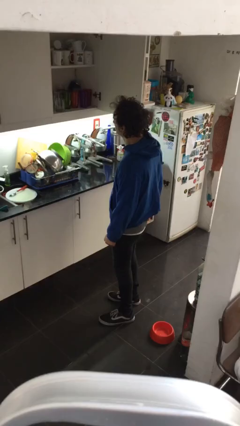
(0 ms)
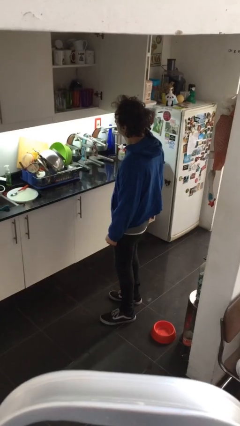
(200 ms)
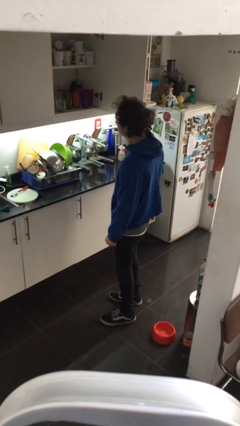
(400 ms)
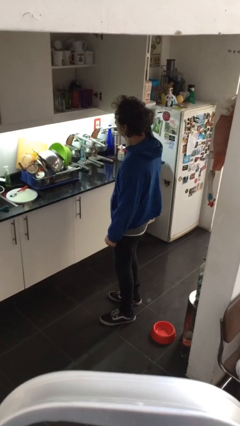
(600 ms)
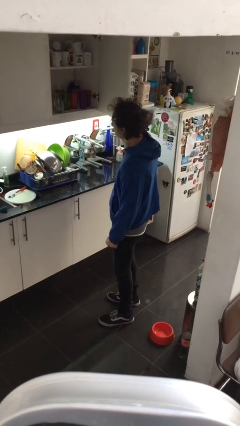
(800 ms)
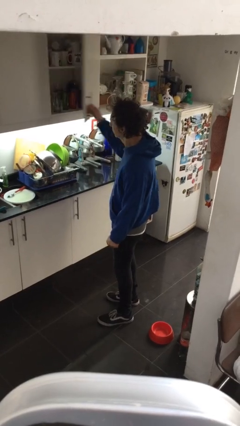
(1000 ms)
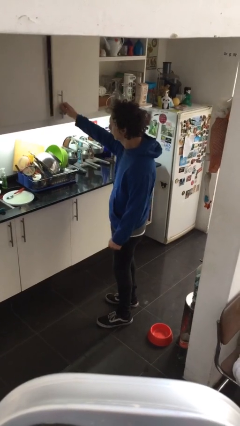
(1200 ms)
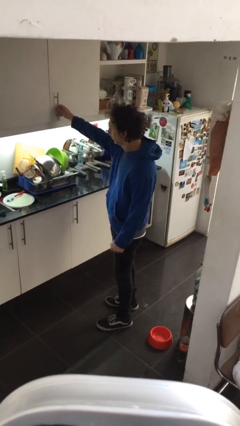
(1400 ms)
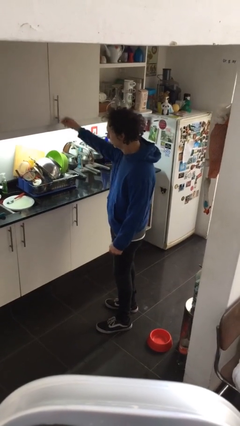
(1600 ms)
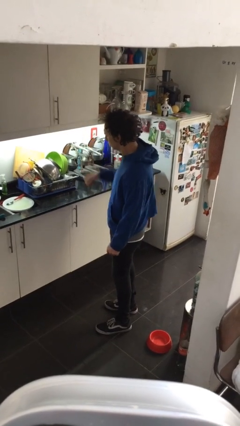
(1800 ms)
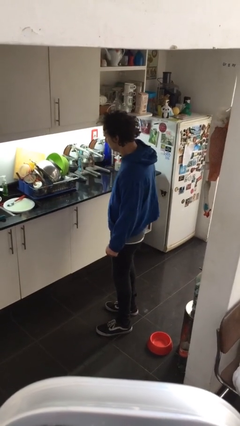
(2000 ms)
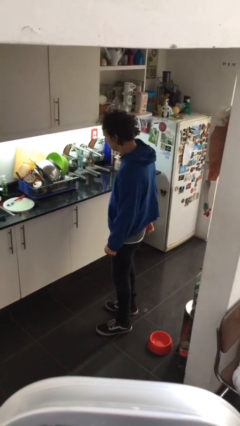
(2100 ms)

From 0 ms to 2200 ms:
person closes cabinet

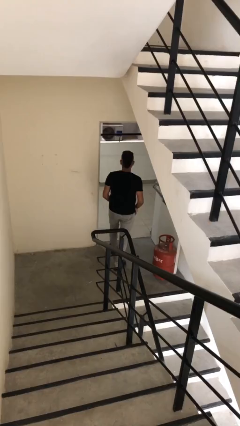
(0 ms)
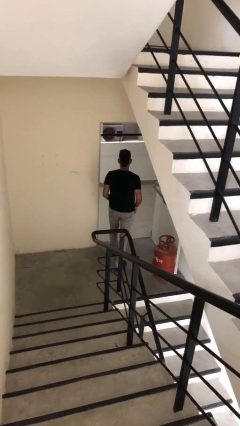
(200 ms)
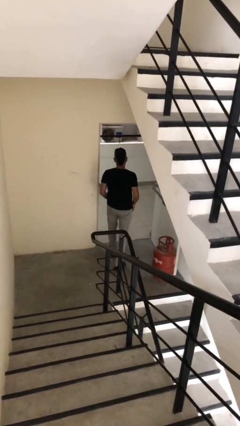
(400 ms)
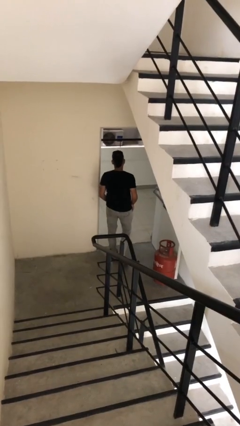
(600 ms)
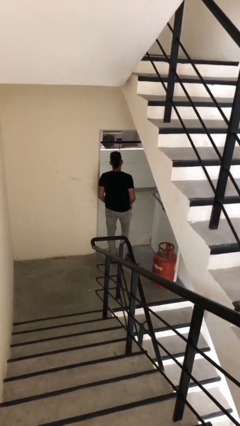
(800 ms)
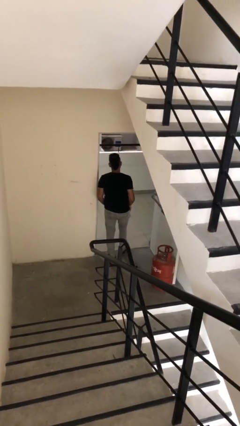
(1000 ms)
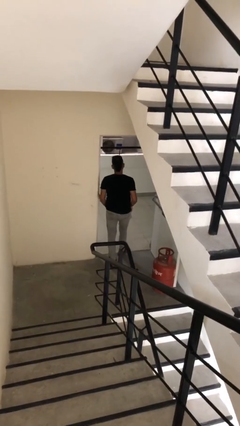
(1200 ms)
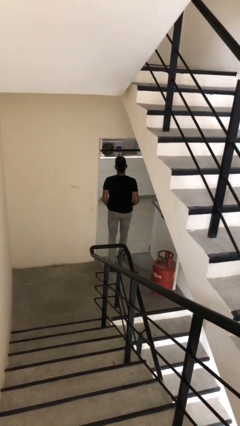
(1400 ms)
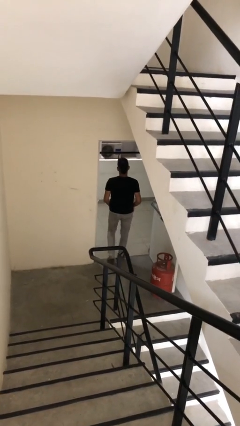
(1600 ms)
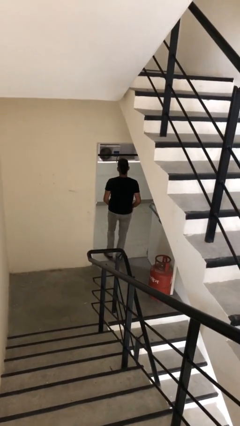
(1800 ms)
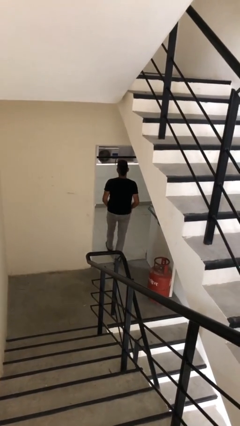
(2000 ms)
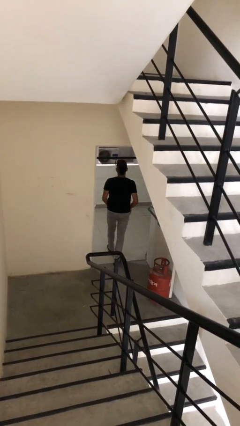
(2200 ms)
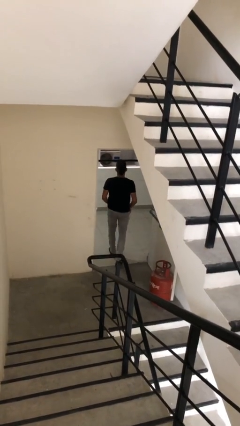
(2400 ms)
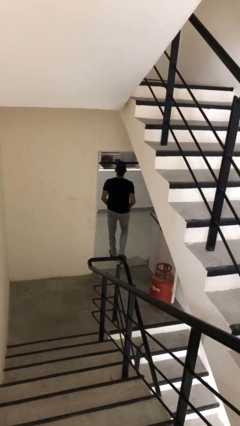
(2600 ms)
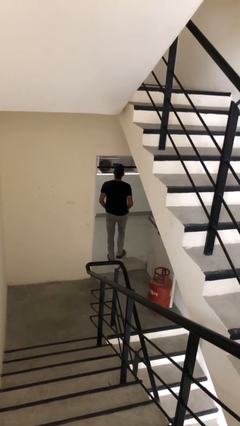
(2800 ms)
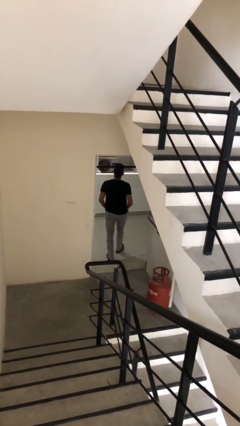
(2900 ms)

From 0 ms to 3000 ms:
person exits scene through structure

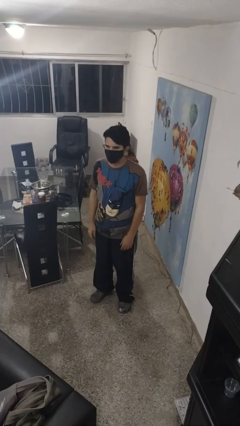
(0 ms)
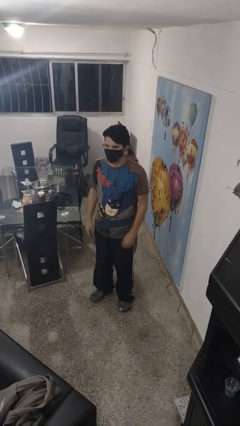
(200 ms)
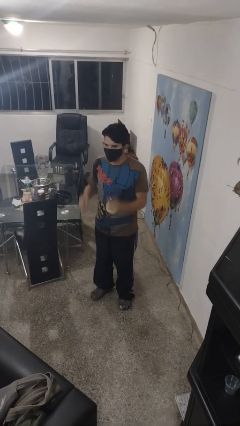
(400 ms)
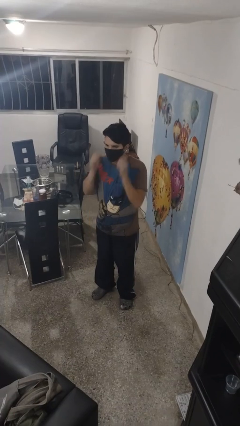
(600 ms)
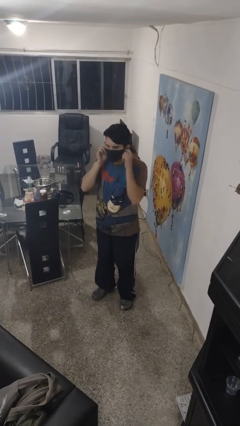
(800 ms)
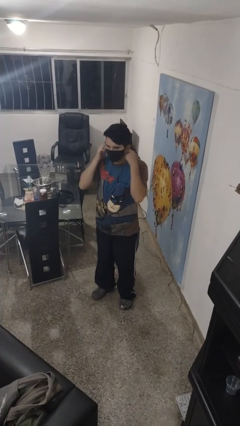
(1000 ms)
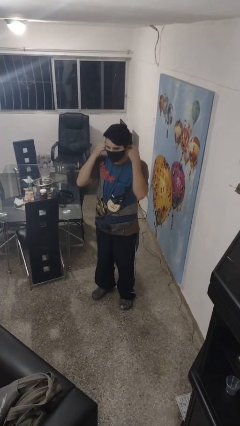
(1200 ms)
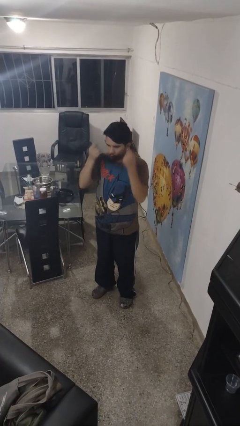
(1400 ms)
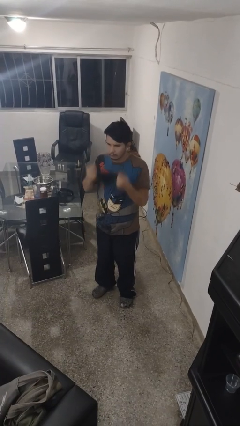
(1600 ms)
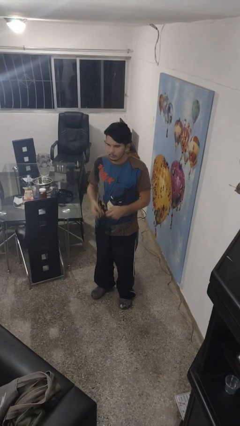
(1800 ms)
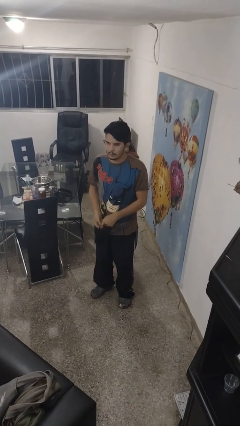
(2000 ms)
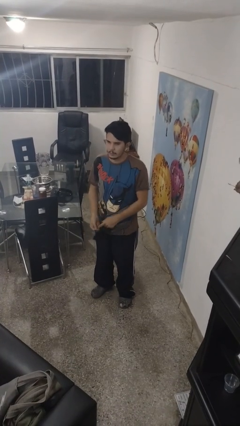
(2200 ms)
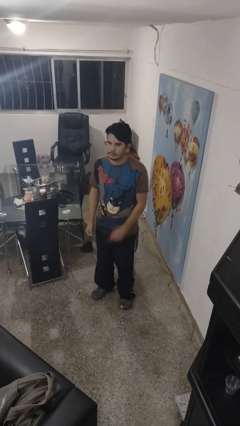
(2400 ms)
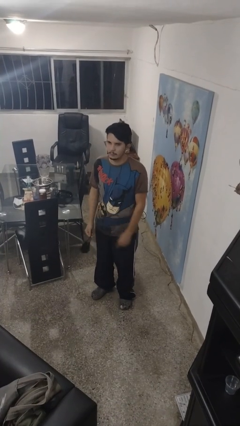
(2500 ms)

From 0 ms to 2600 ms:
person takes off facemask

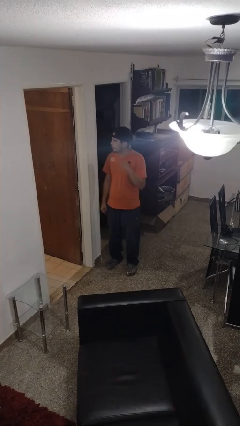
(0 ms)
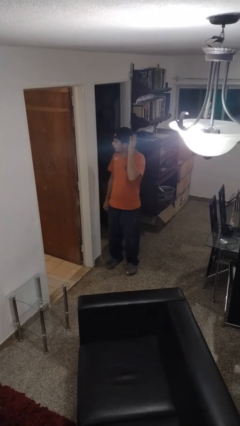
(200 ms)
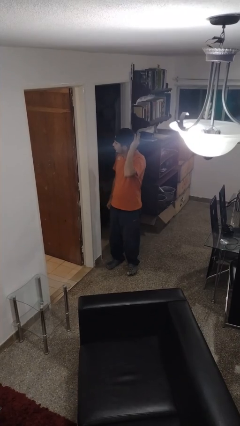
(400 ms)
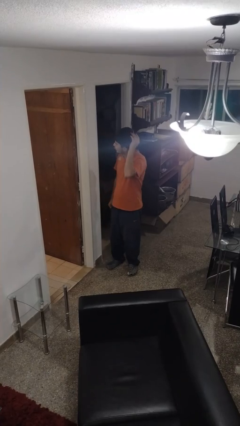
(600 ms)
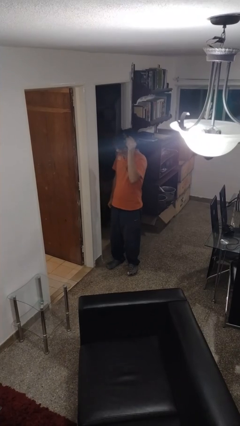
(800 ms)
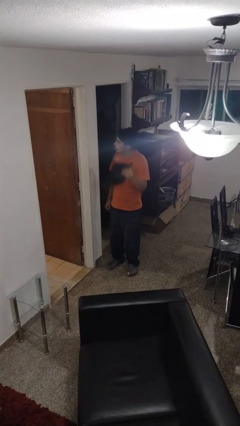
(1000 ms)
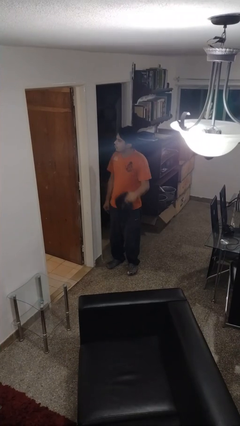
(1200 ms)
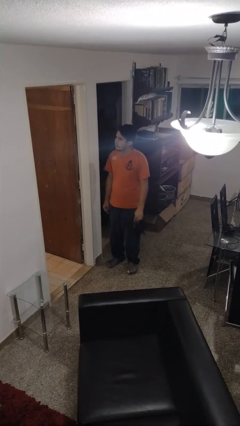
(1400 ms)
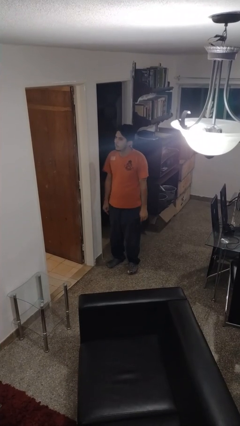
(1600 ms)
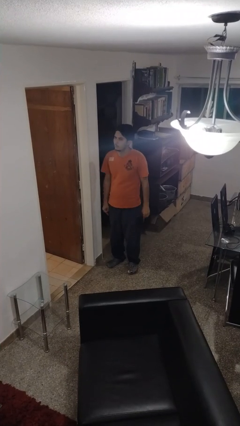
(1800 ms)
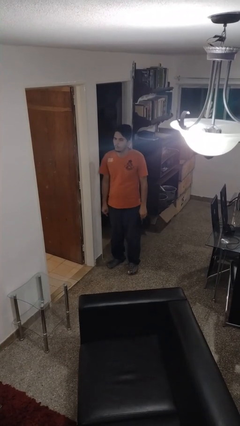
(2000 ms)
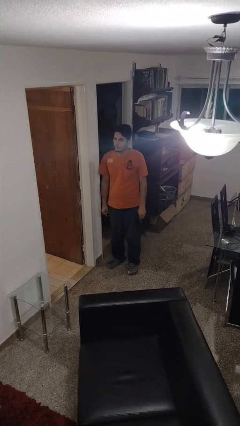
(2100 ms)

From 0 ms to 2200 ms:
person takes off hat

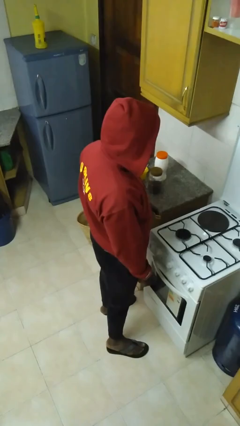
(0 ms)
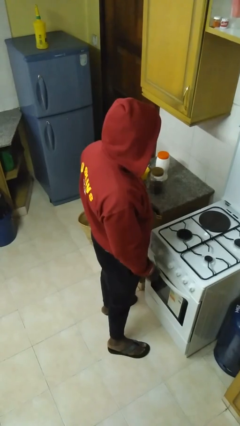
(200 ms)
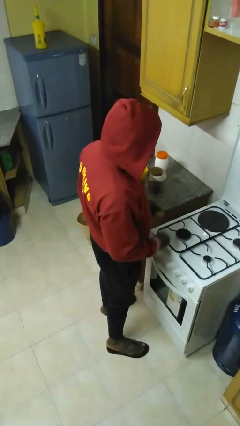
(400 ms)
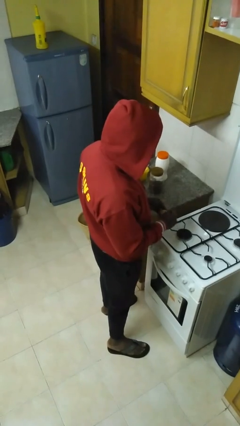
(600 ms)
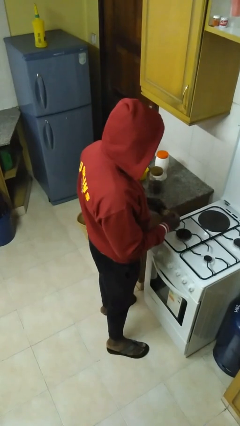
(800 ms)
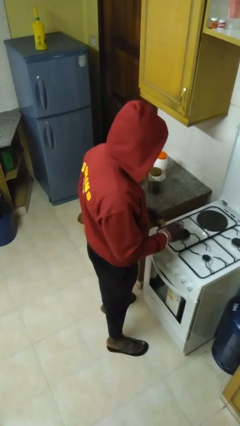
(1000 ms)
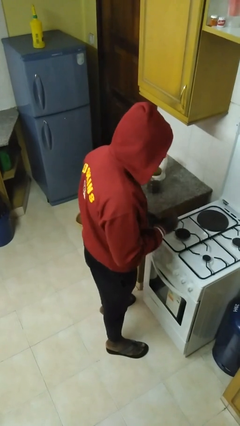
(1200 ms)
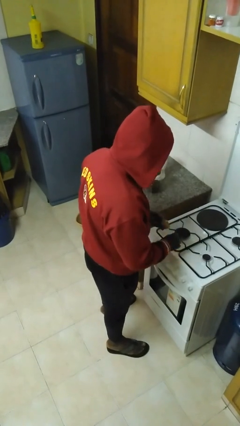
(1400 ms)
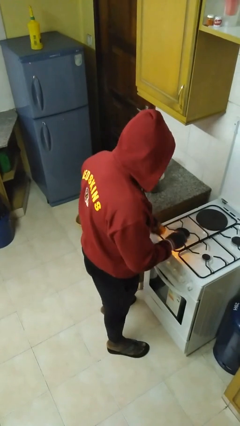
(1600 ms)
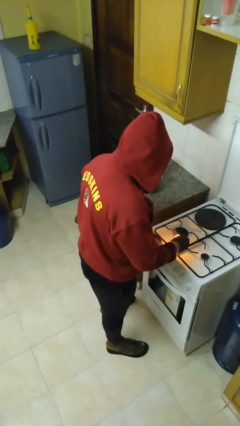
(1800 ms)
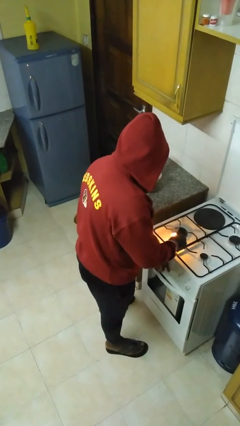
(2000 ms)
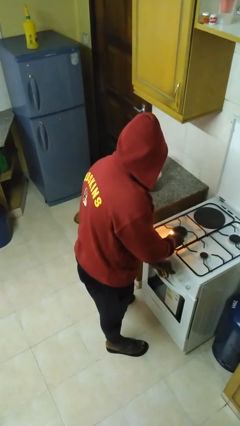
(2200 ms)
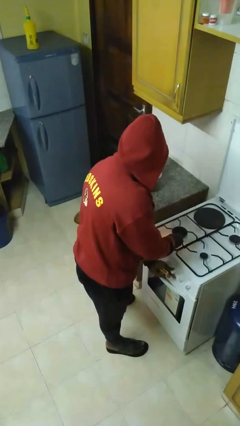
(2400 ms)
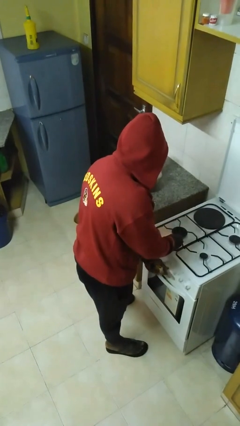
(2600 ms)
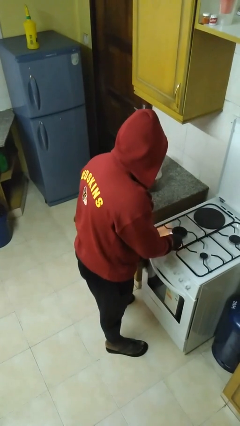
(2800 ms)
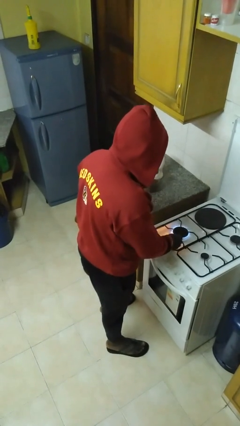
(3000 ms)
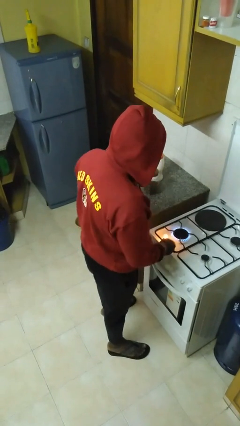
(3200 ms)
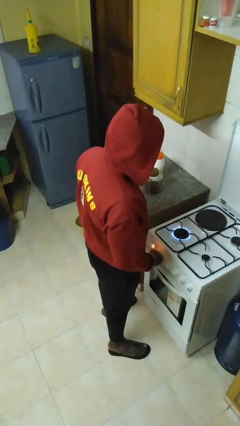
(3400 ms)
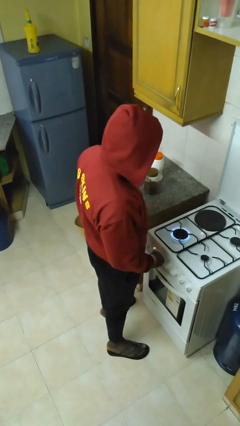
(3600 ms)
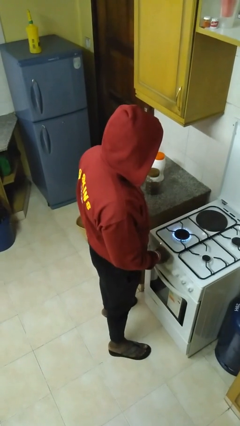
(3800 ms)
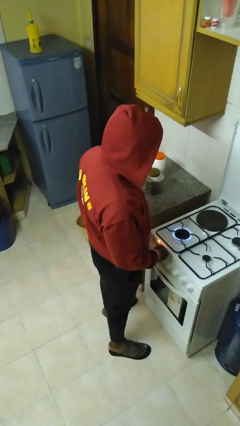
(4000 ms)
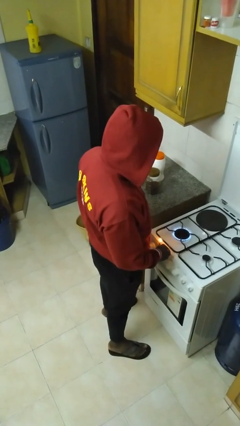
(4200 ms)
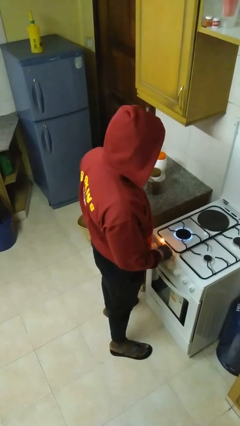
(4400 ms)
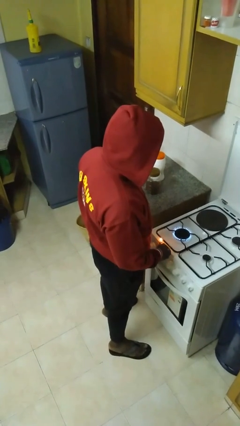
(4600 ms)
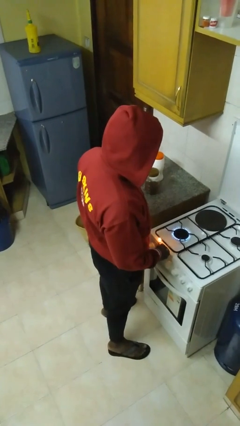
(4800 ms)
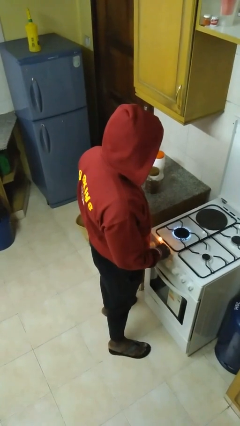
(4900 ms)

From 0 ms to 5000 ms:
person turns on stovetop

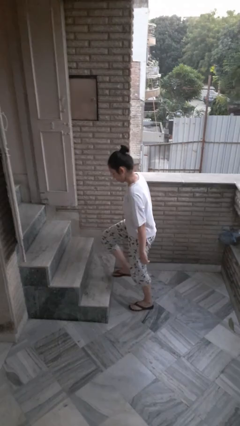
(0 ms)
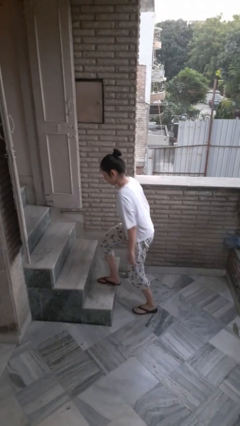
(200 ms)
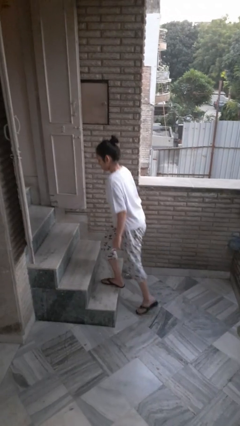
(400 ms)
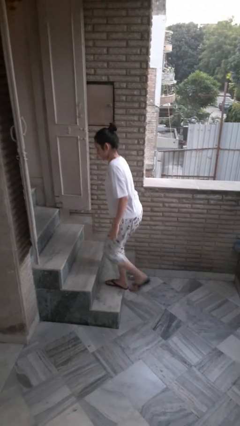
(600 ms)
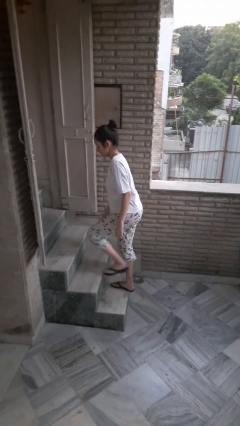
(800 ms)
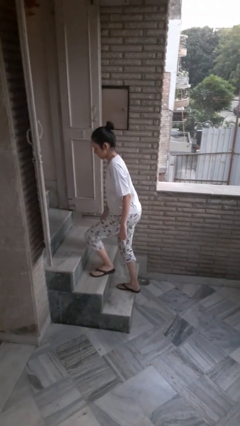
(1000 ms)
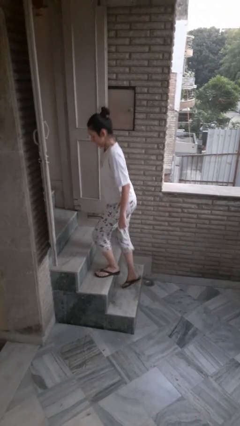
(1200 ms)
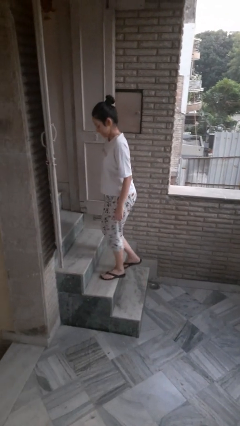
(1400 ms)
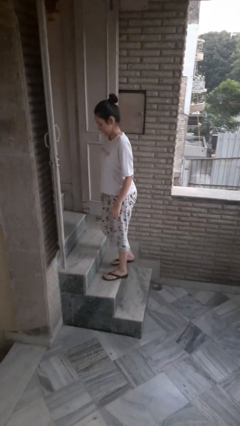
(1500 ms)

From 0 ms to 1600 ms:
person climbs up stairs

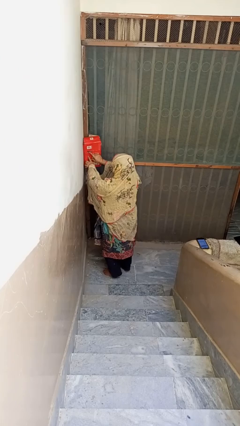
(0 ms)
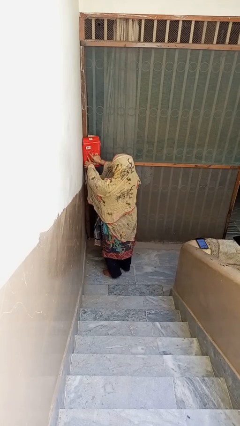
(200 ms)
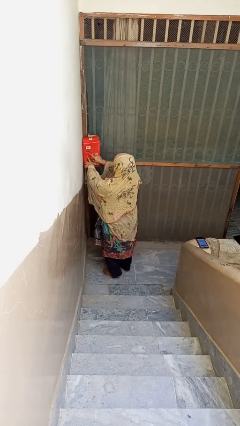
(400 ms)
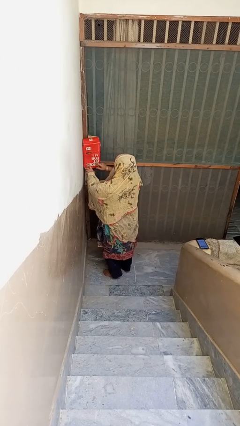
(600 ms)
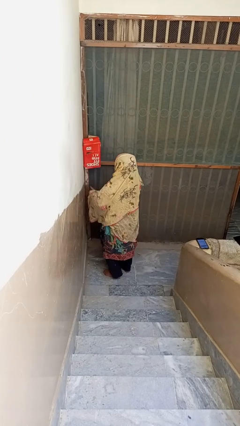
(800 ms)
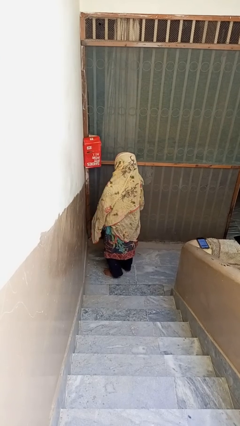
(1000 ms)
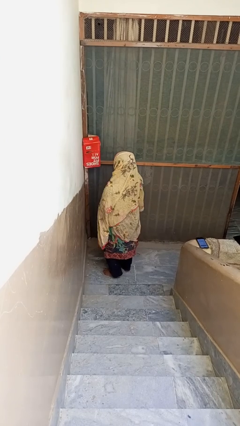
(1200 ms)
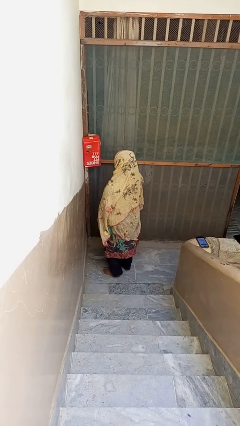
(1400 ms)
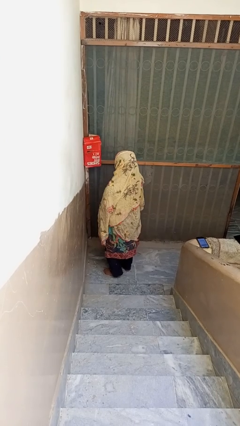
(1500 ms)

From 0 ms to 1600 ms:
person closes mailbox
